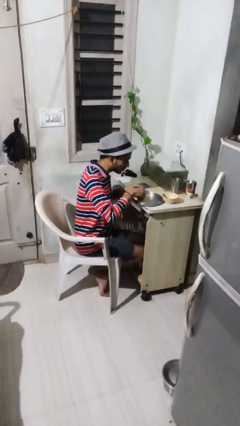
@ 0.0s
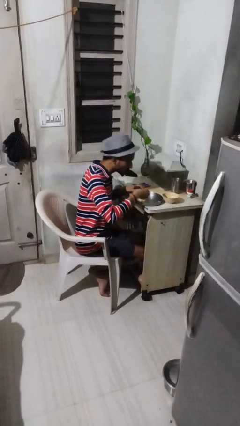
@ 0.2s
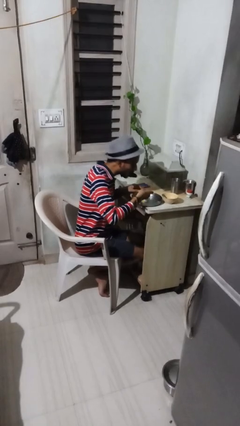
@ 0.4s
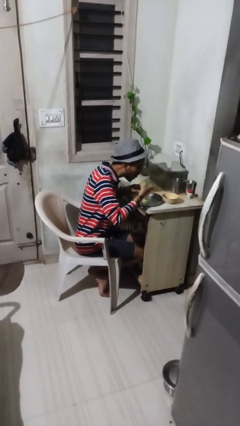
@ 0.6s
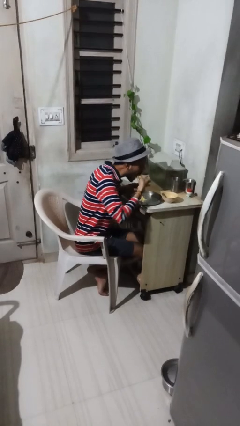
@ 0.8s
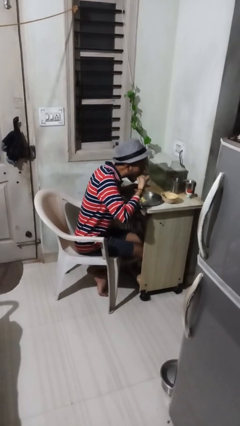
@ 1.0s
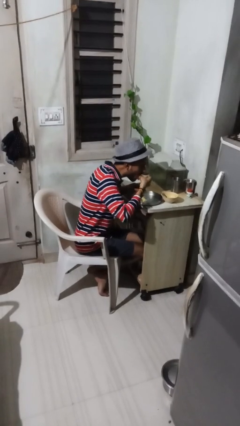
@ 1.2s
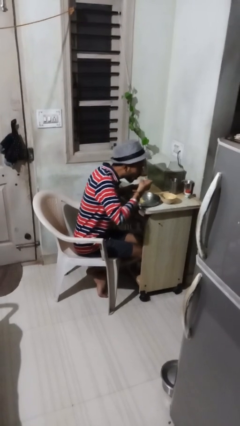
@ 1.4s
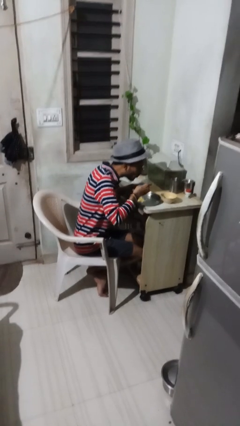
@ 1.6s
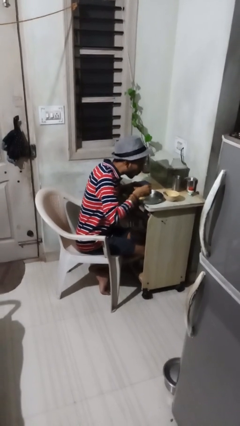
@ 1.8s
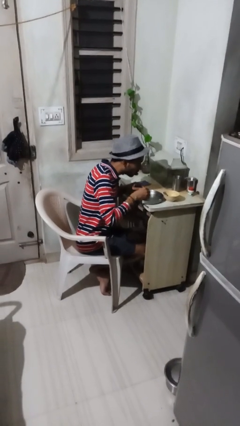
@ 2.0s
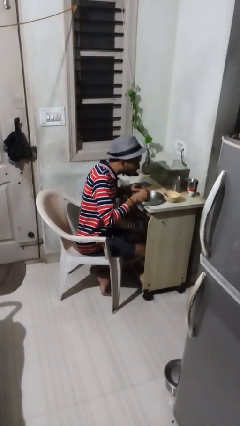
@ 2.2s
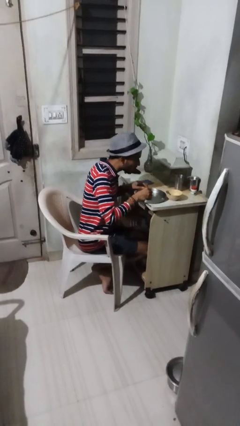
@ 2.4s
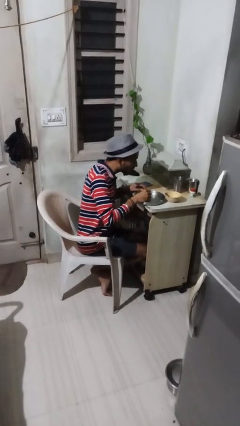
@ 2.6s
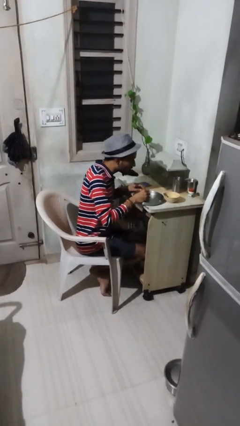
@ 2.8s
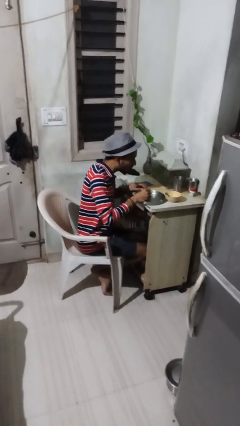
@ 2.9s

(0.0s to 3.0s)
person eats with utensil

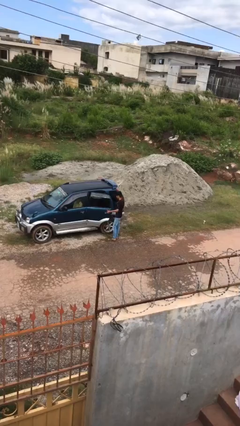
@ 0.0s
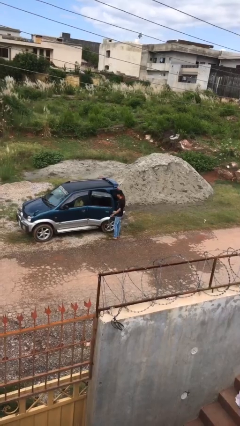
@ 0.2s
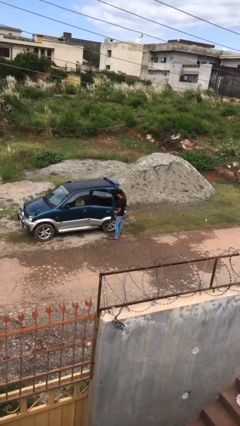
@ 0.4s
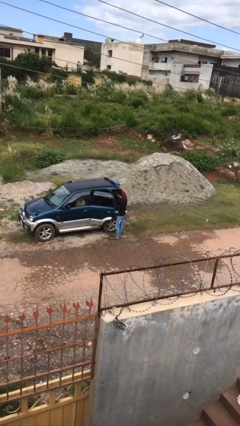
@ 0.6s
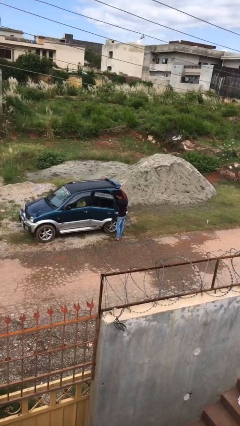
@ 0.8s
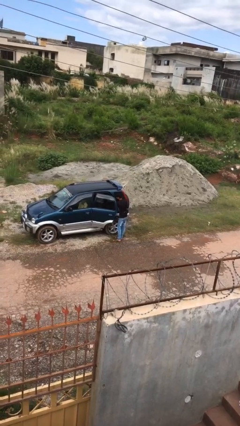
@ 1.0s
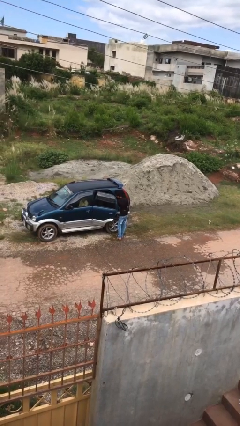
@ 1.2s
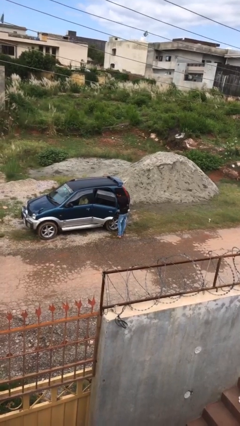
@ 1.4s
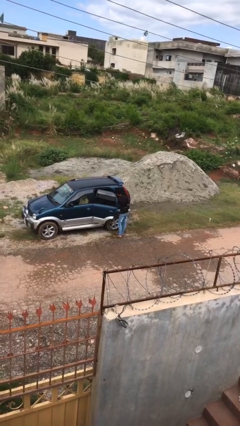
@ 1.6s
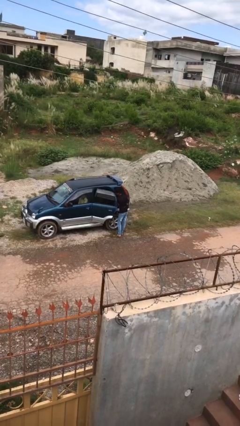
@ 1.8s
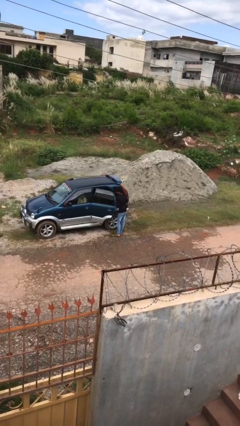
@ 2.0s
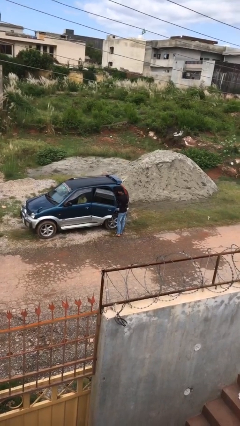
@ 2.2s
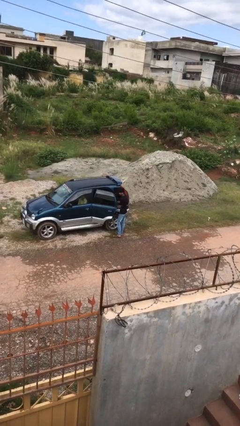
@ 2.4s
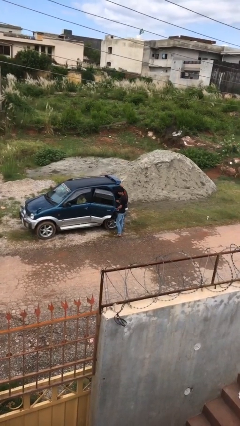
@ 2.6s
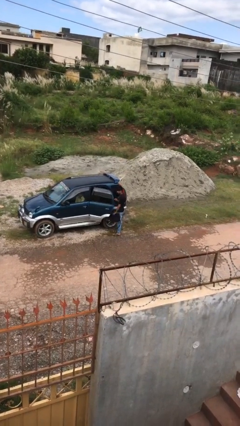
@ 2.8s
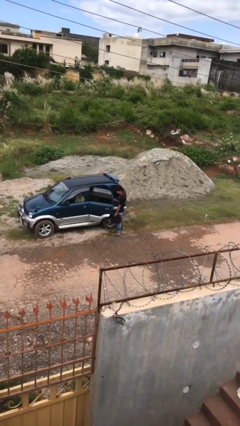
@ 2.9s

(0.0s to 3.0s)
person unloads car

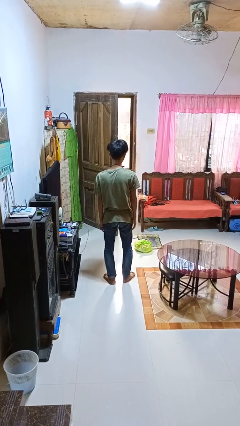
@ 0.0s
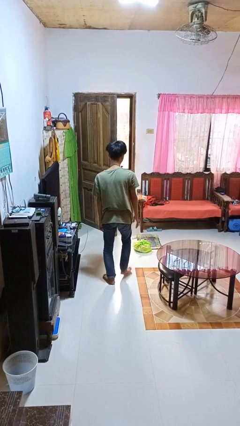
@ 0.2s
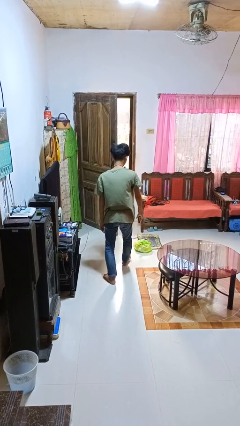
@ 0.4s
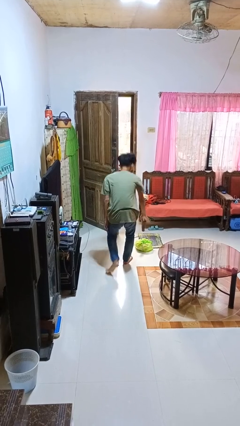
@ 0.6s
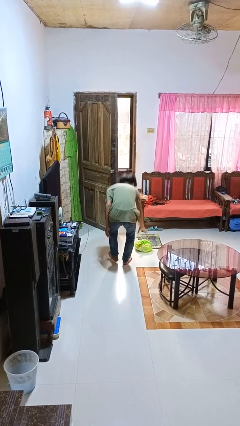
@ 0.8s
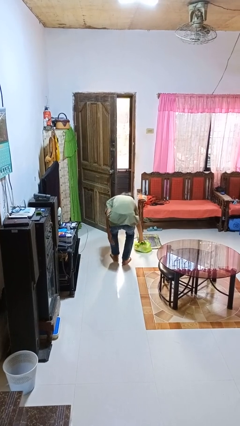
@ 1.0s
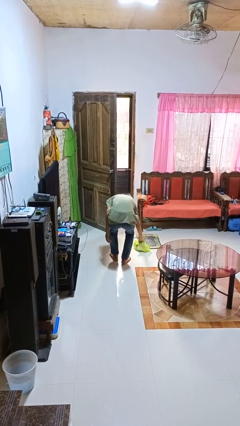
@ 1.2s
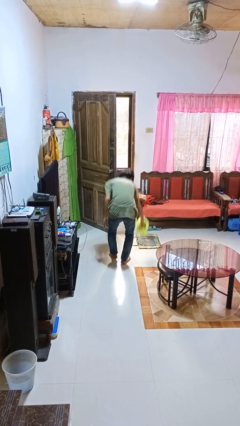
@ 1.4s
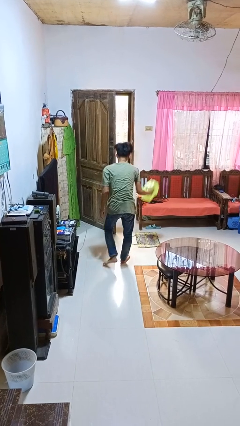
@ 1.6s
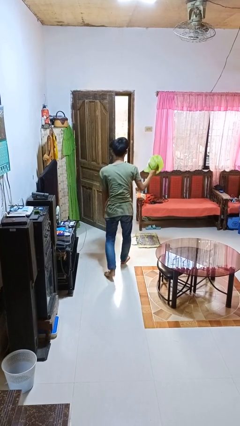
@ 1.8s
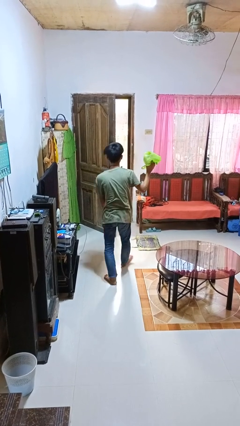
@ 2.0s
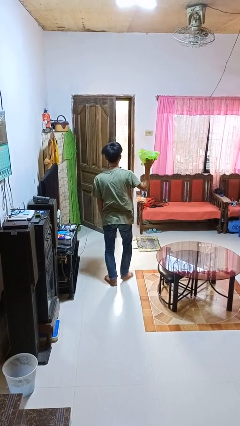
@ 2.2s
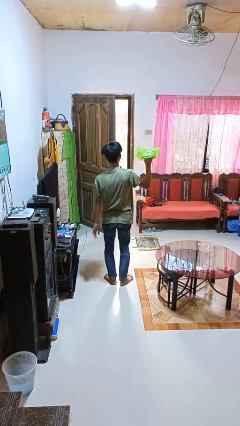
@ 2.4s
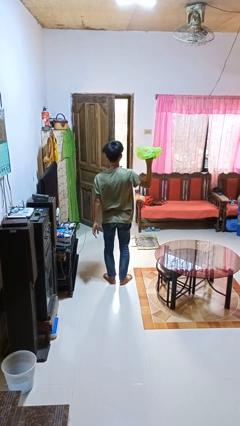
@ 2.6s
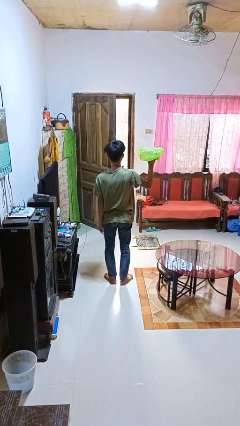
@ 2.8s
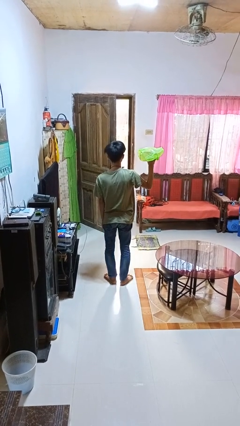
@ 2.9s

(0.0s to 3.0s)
person picks up object from floor

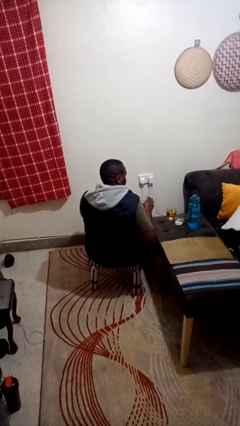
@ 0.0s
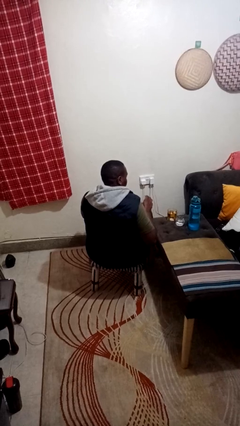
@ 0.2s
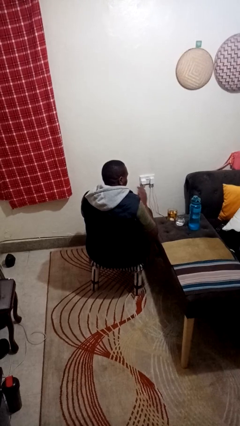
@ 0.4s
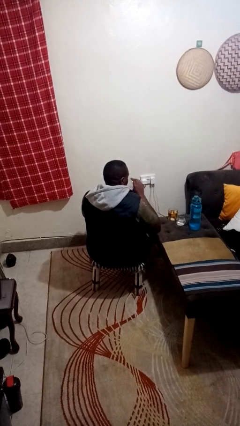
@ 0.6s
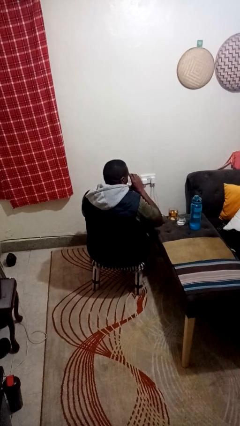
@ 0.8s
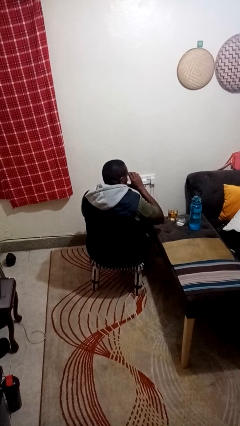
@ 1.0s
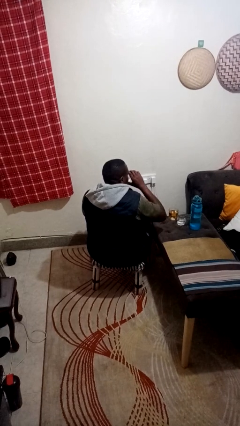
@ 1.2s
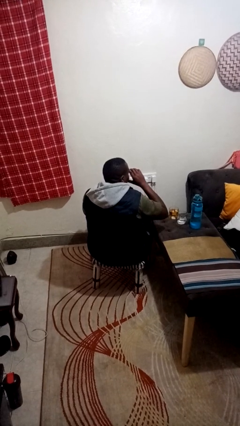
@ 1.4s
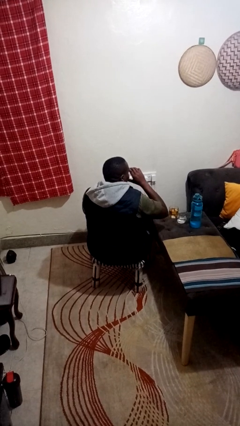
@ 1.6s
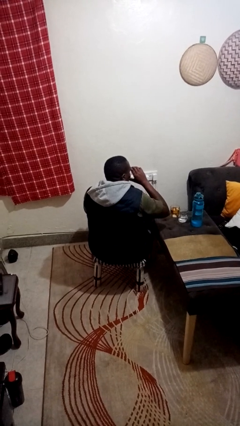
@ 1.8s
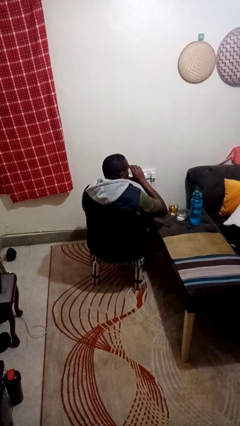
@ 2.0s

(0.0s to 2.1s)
person drinks from shotglass

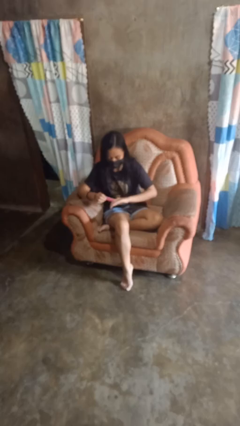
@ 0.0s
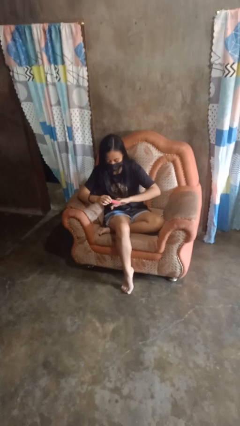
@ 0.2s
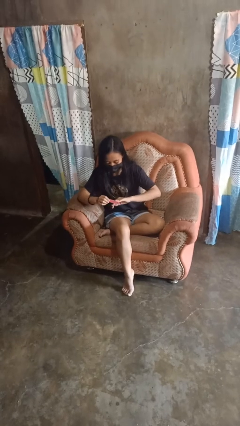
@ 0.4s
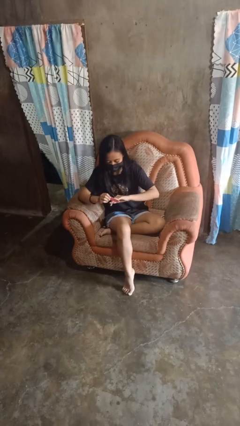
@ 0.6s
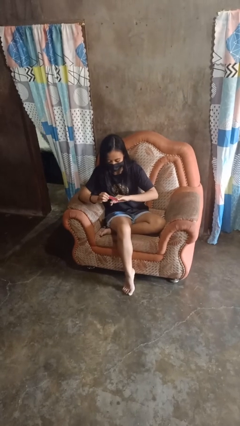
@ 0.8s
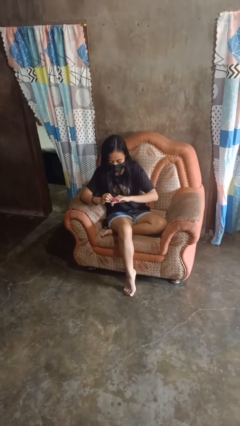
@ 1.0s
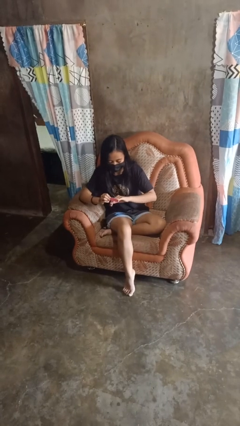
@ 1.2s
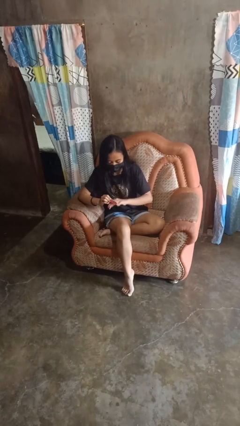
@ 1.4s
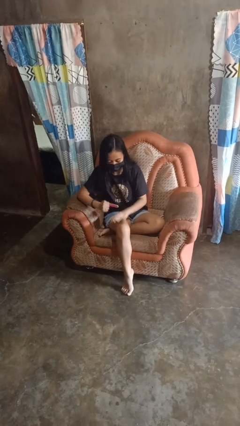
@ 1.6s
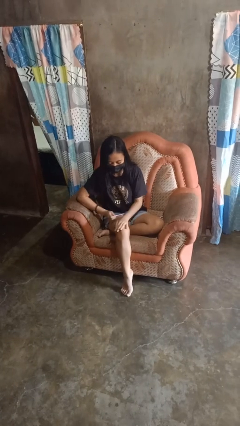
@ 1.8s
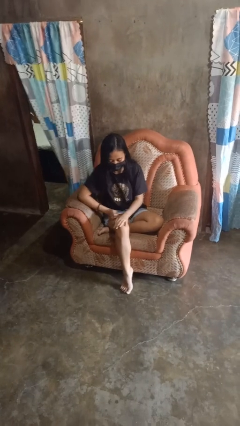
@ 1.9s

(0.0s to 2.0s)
person files fingernails

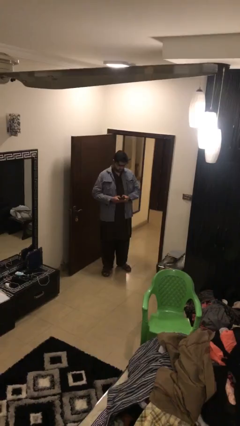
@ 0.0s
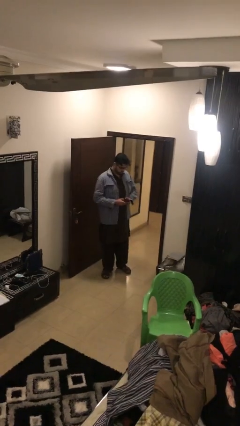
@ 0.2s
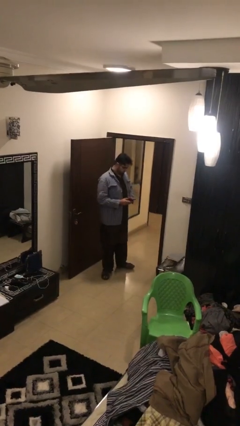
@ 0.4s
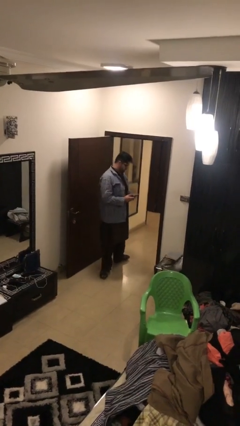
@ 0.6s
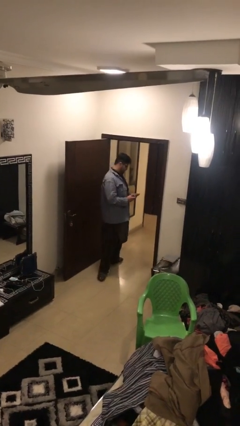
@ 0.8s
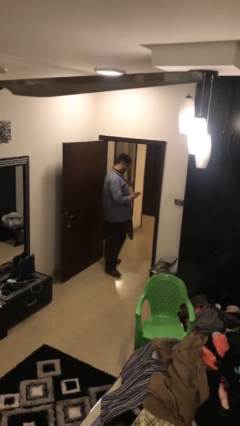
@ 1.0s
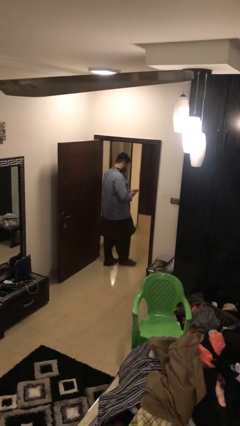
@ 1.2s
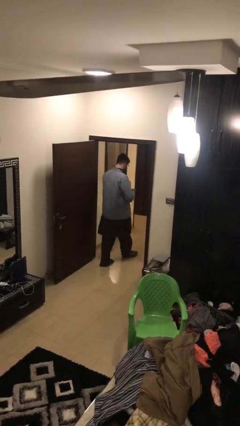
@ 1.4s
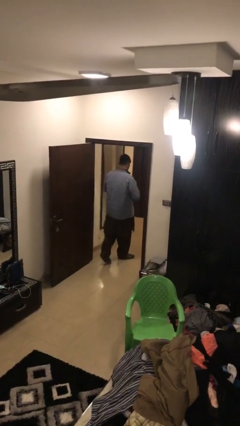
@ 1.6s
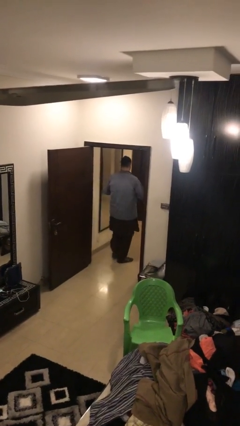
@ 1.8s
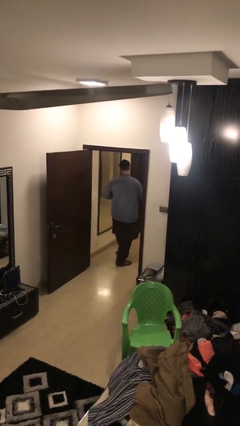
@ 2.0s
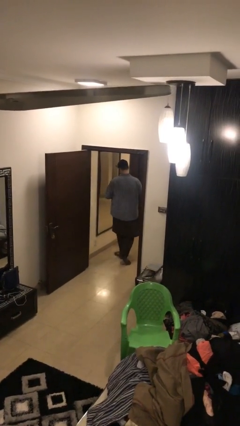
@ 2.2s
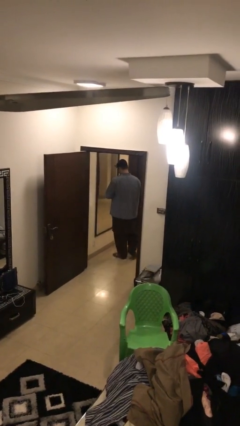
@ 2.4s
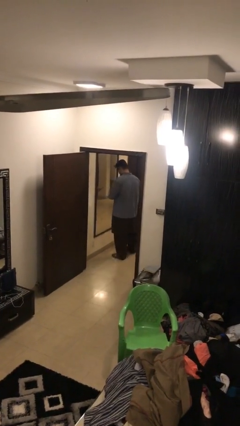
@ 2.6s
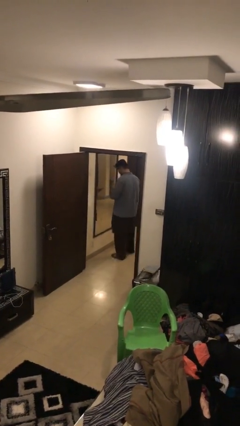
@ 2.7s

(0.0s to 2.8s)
person exits scene through structure

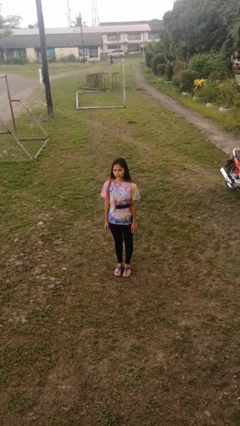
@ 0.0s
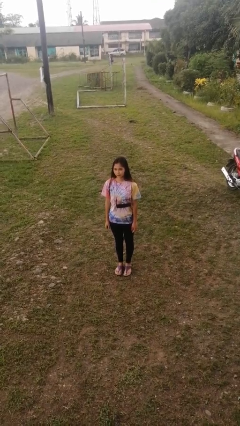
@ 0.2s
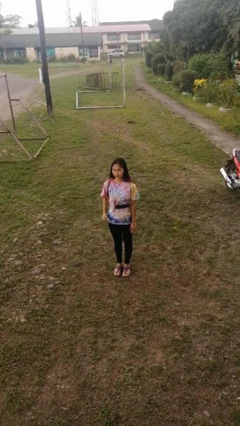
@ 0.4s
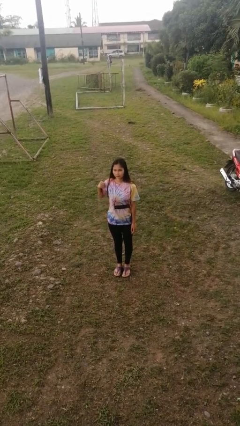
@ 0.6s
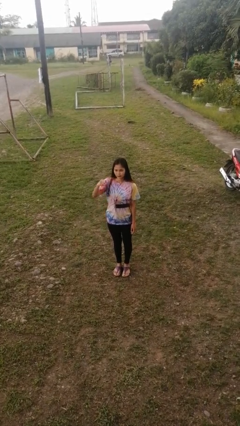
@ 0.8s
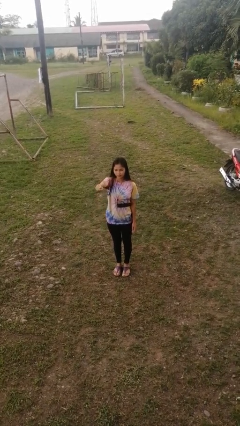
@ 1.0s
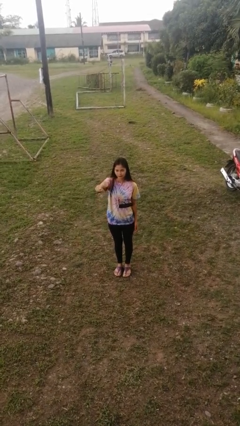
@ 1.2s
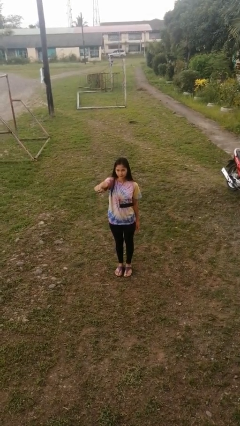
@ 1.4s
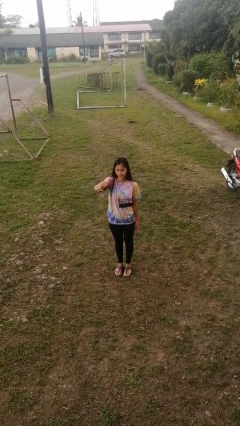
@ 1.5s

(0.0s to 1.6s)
person punches
